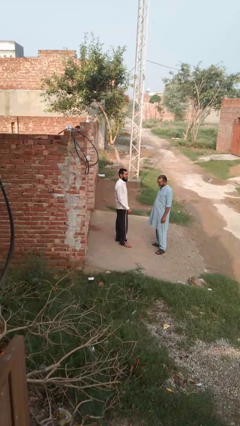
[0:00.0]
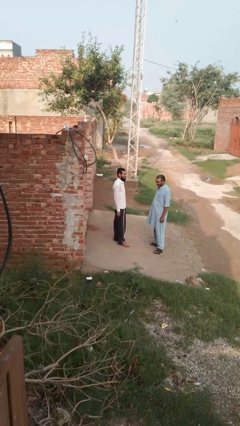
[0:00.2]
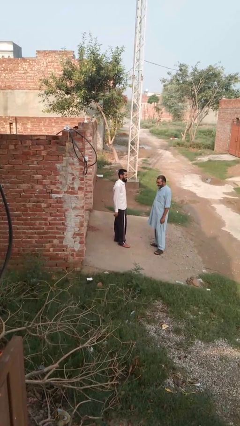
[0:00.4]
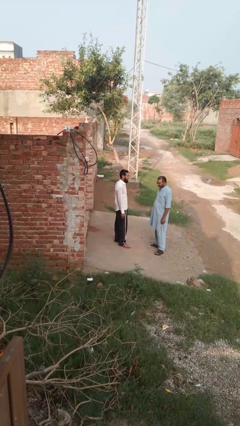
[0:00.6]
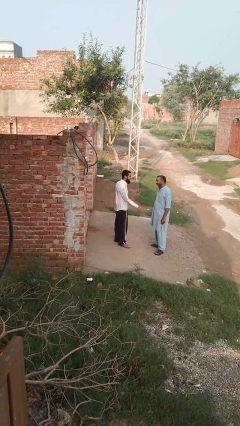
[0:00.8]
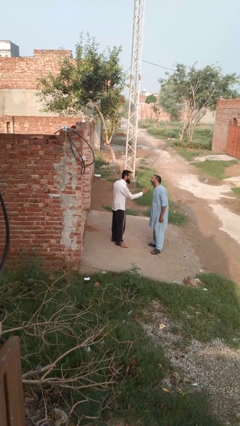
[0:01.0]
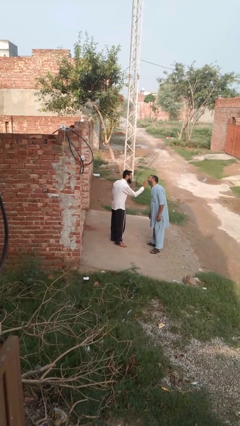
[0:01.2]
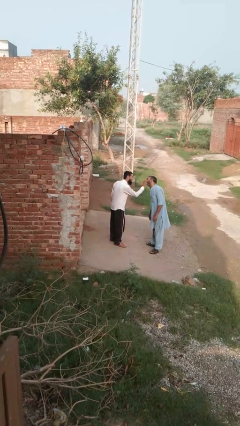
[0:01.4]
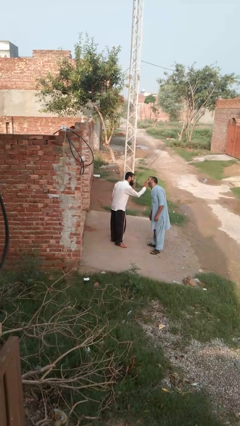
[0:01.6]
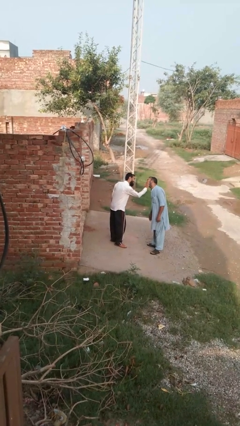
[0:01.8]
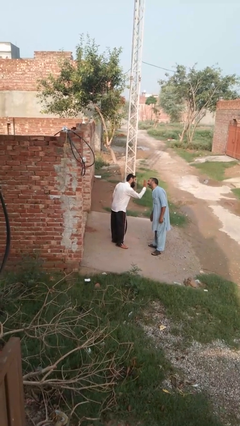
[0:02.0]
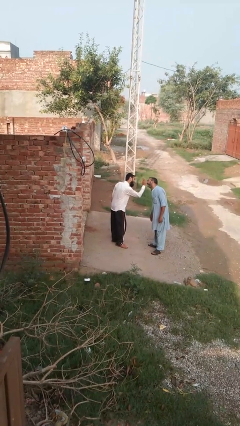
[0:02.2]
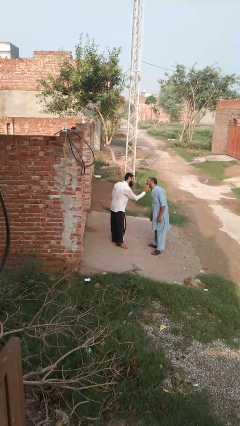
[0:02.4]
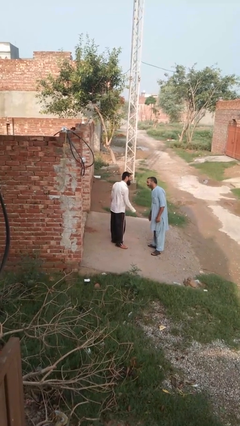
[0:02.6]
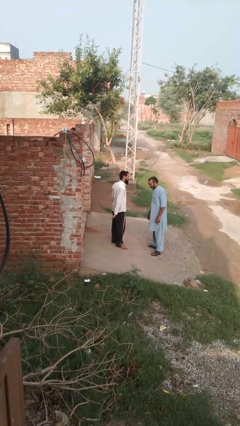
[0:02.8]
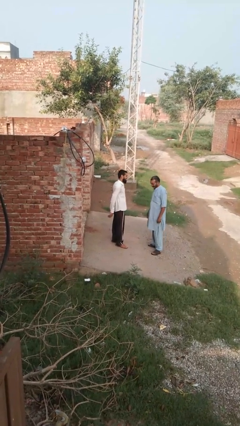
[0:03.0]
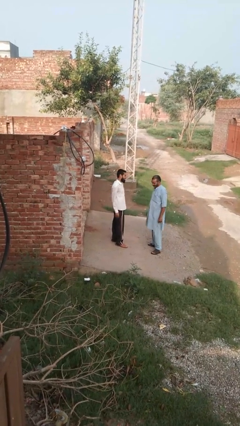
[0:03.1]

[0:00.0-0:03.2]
person touches face of person

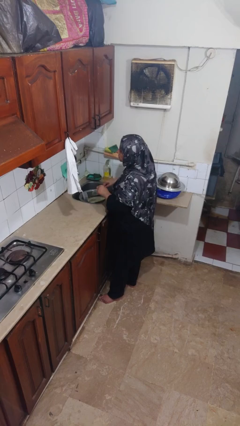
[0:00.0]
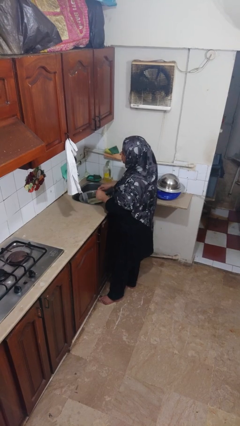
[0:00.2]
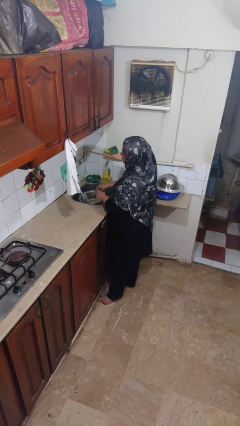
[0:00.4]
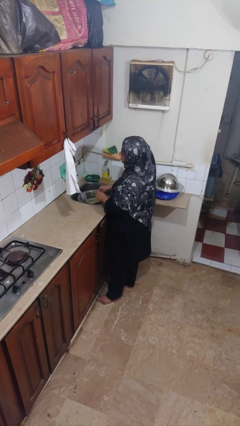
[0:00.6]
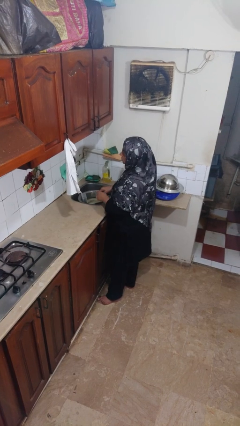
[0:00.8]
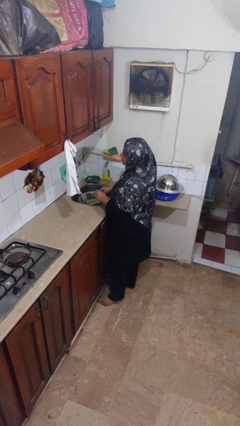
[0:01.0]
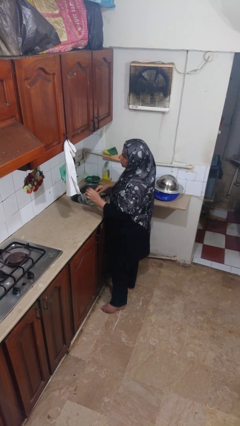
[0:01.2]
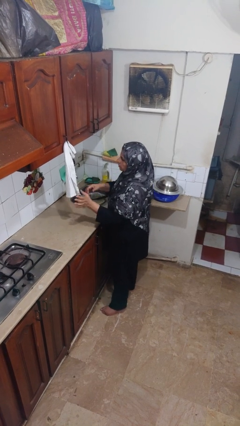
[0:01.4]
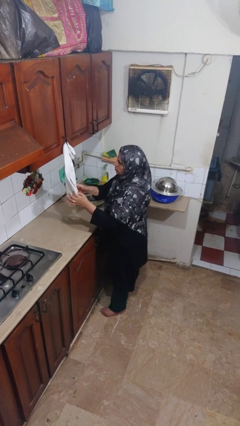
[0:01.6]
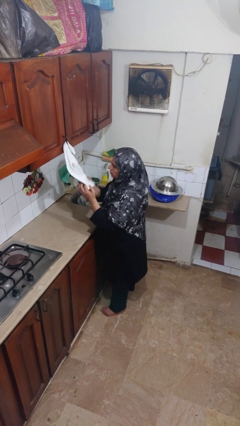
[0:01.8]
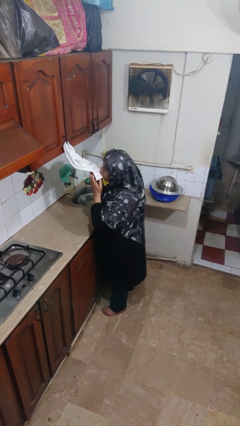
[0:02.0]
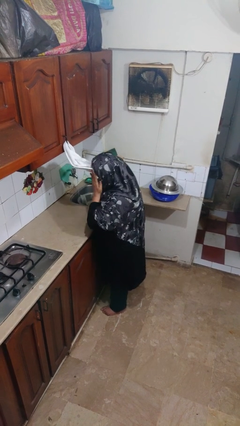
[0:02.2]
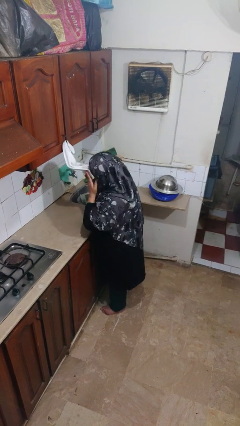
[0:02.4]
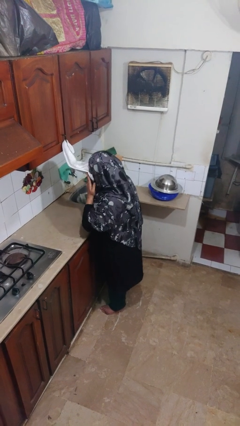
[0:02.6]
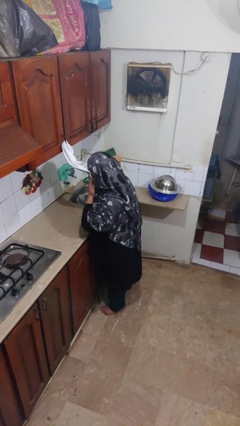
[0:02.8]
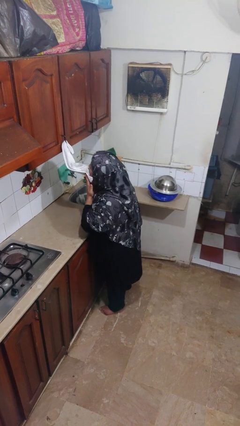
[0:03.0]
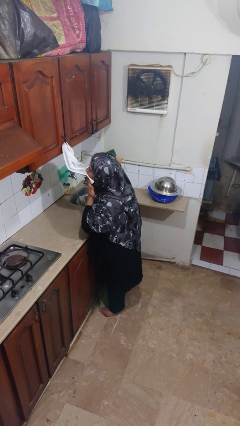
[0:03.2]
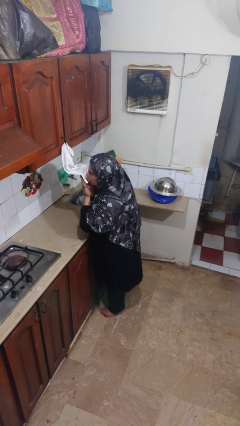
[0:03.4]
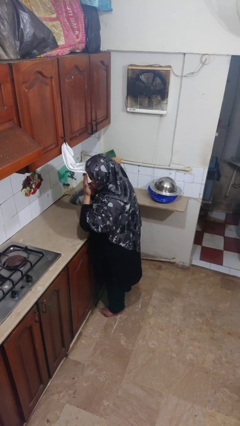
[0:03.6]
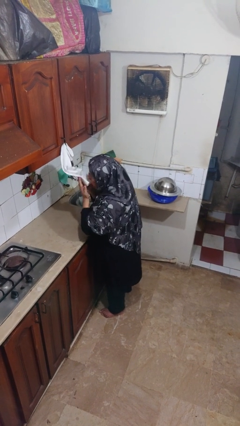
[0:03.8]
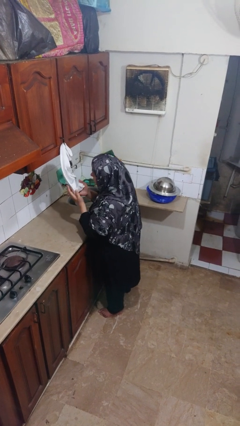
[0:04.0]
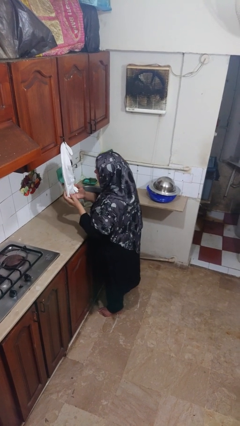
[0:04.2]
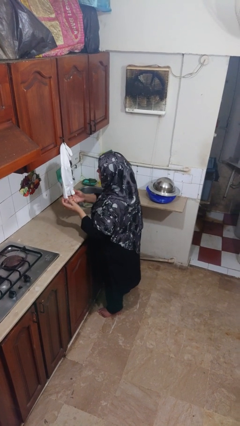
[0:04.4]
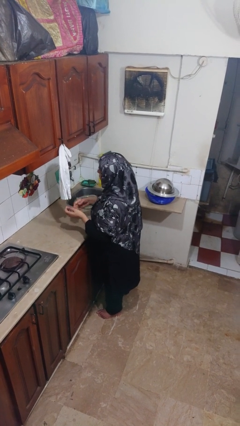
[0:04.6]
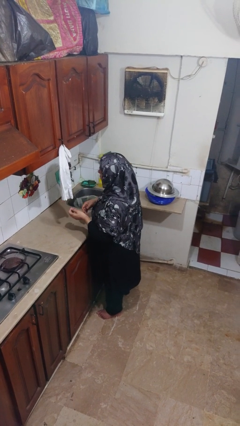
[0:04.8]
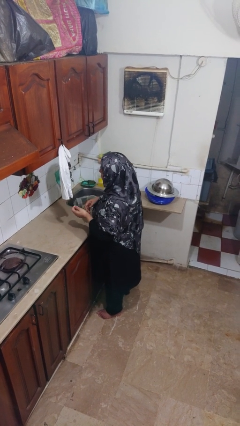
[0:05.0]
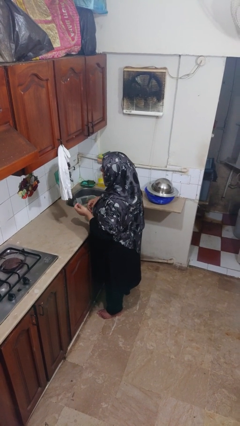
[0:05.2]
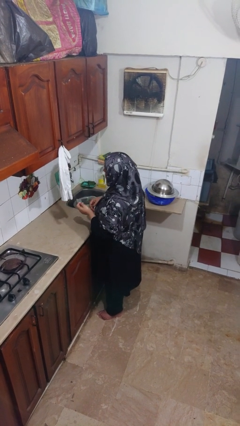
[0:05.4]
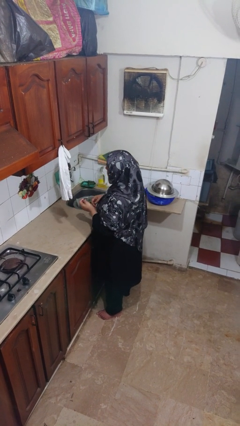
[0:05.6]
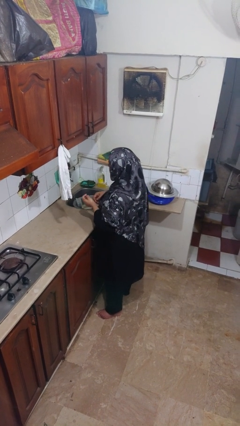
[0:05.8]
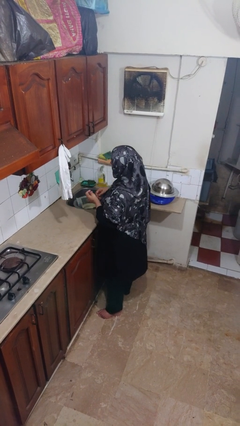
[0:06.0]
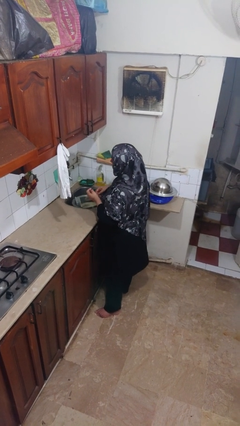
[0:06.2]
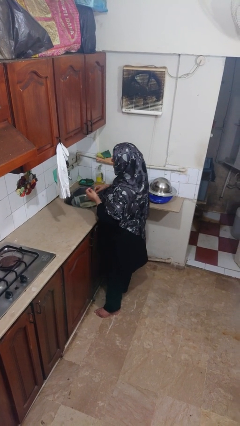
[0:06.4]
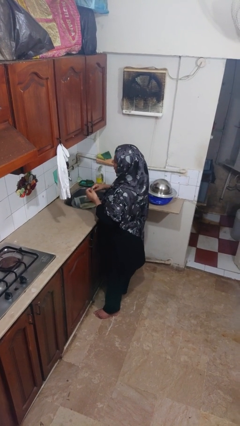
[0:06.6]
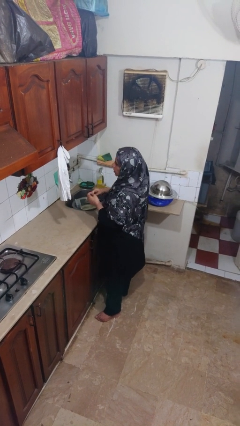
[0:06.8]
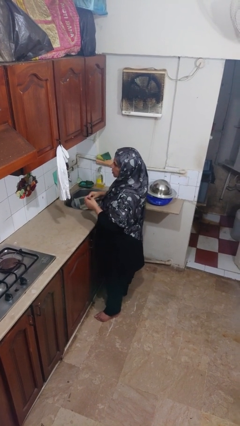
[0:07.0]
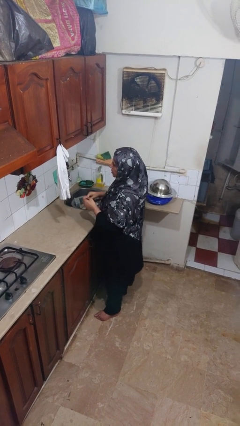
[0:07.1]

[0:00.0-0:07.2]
person dries face with towel

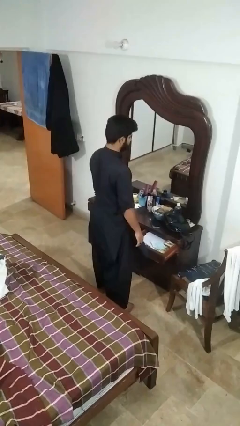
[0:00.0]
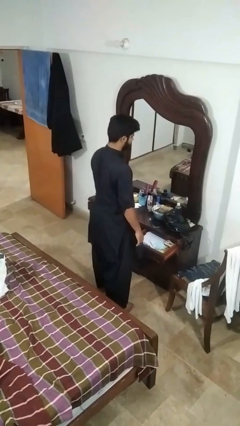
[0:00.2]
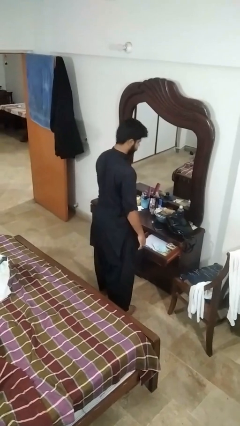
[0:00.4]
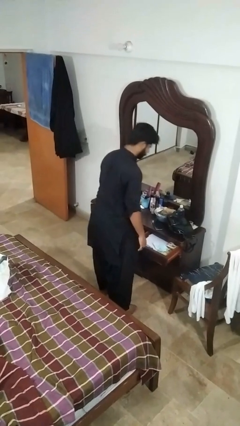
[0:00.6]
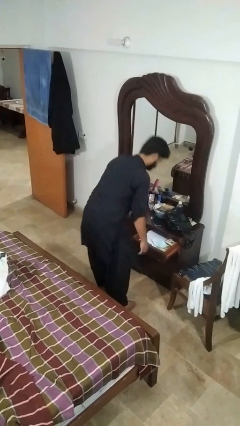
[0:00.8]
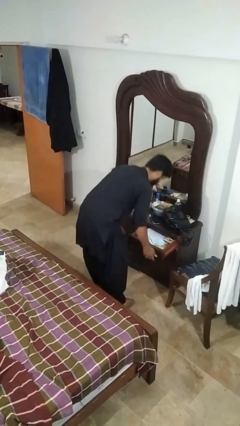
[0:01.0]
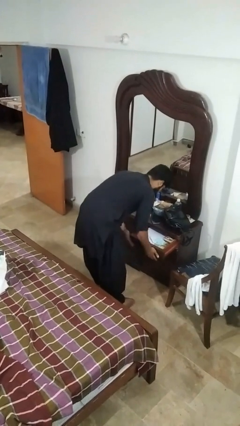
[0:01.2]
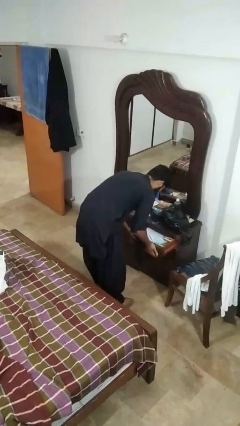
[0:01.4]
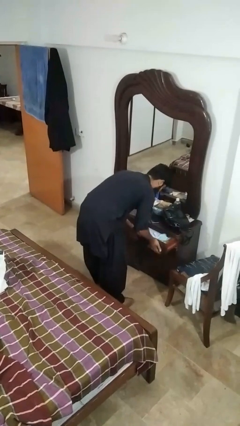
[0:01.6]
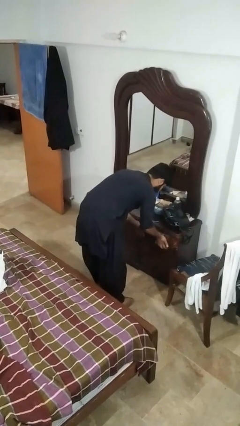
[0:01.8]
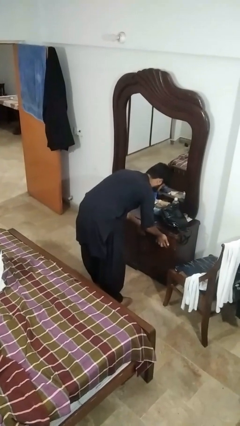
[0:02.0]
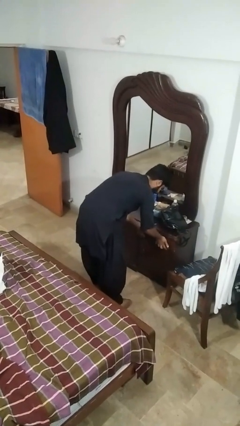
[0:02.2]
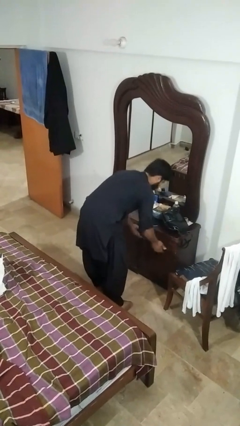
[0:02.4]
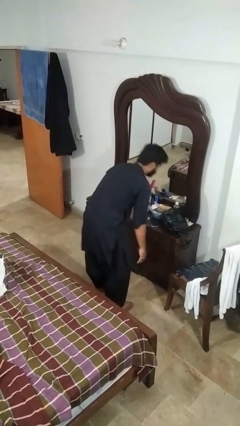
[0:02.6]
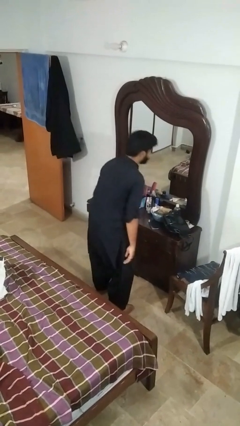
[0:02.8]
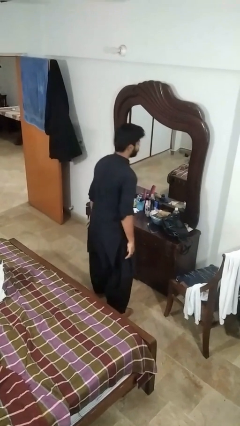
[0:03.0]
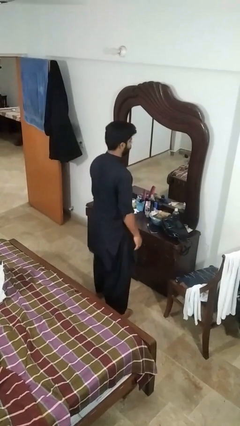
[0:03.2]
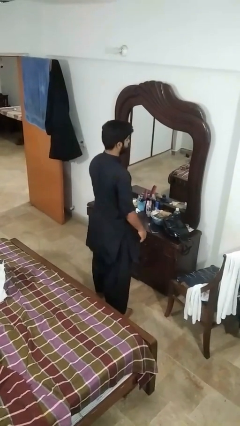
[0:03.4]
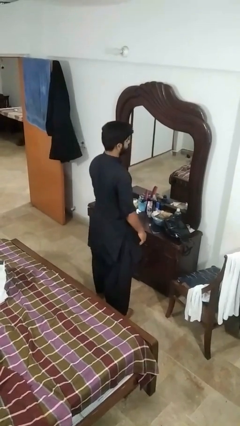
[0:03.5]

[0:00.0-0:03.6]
person closes dresser drawer

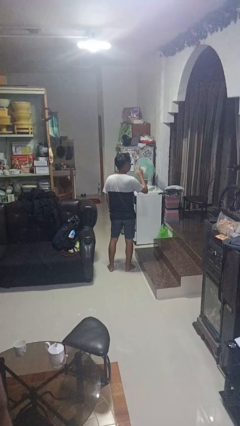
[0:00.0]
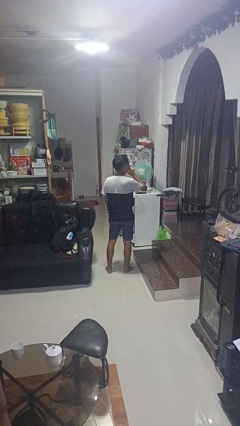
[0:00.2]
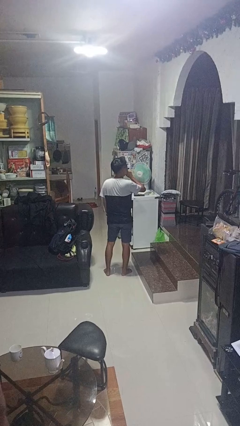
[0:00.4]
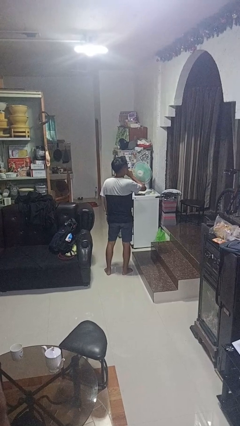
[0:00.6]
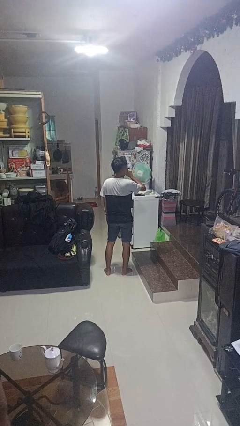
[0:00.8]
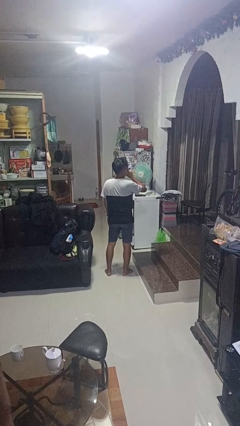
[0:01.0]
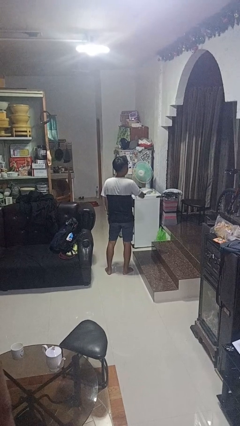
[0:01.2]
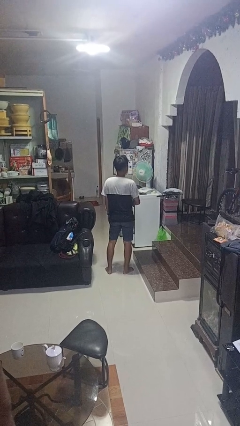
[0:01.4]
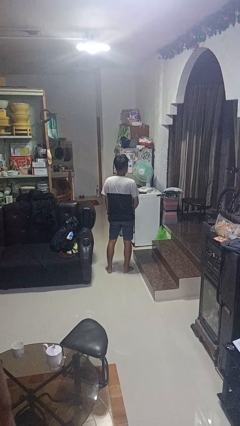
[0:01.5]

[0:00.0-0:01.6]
person gestures be quiet

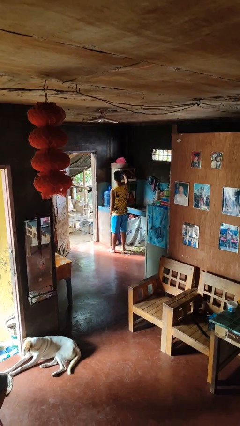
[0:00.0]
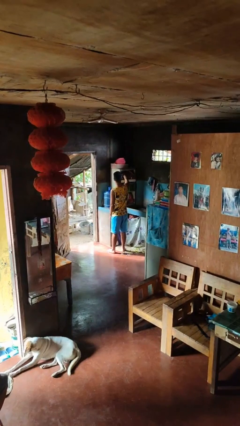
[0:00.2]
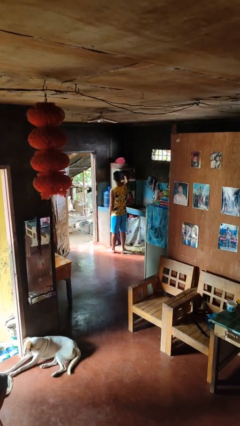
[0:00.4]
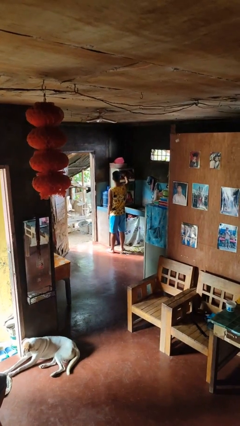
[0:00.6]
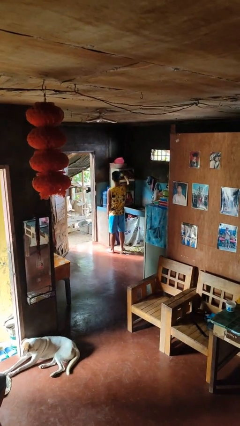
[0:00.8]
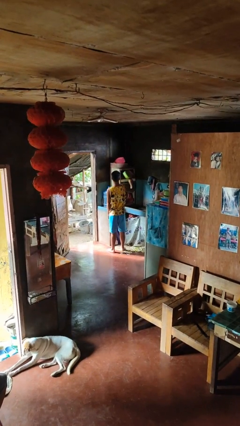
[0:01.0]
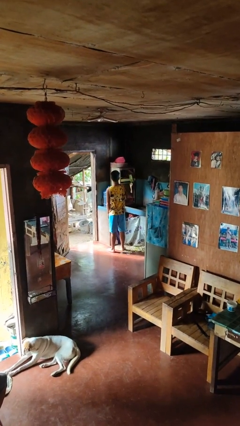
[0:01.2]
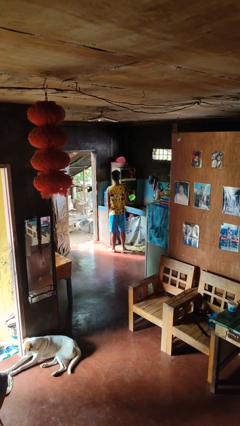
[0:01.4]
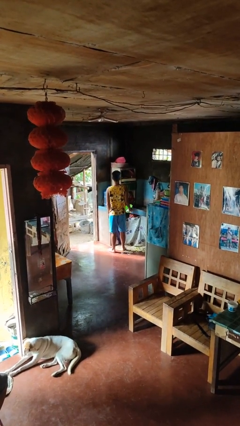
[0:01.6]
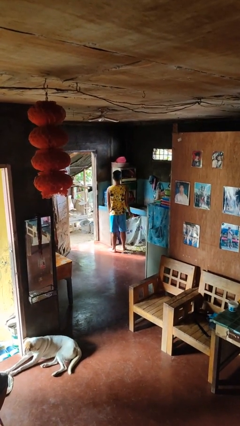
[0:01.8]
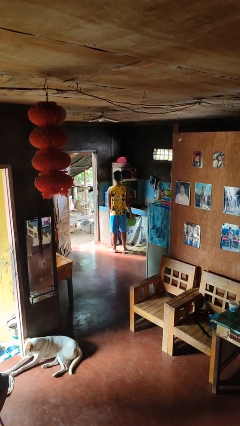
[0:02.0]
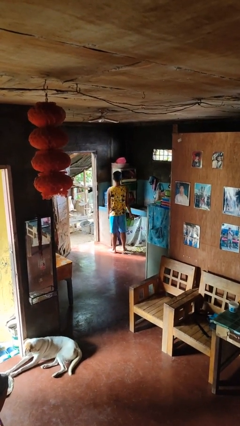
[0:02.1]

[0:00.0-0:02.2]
person takes object from cabinet
